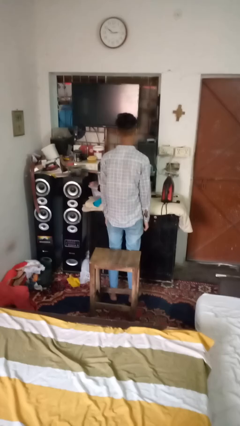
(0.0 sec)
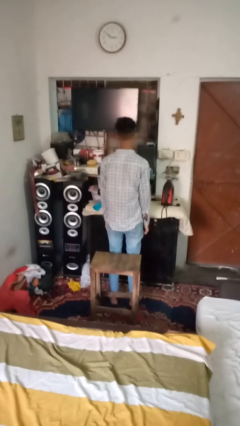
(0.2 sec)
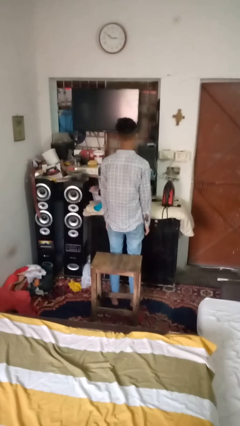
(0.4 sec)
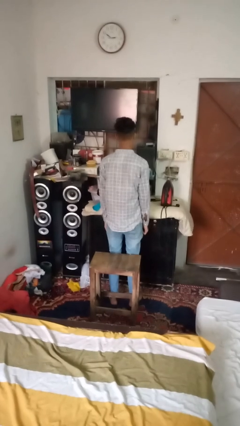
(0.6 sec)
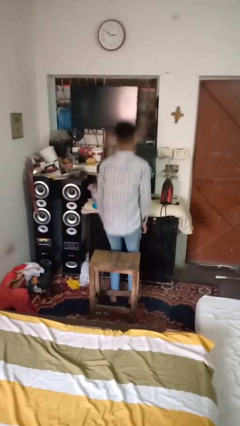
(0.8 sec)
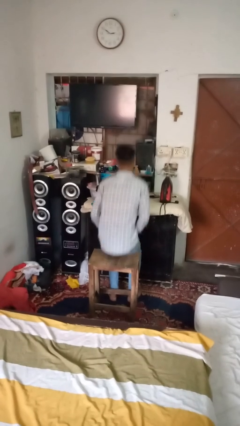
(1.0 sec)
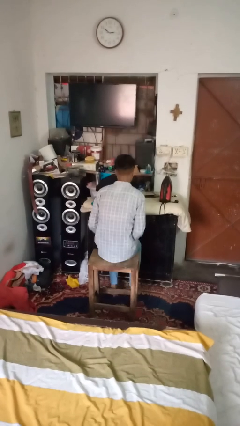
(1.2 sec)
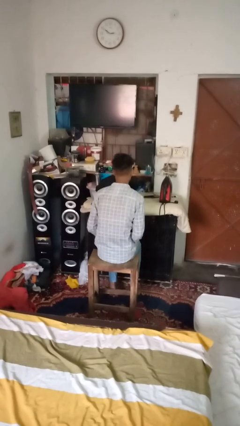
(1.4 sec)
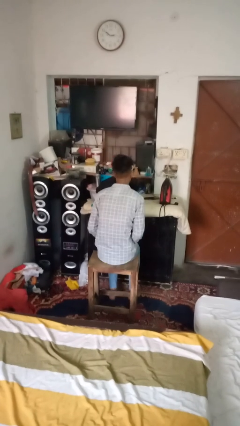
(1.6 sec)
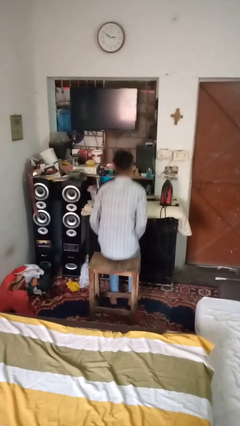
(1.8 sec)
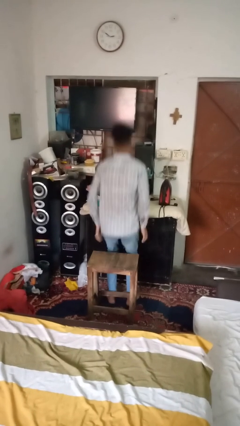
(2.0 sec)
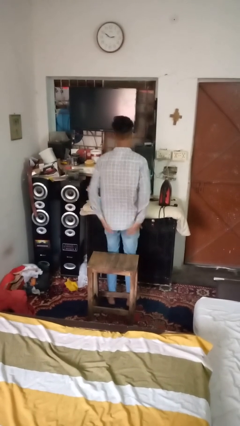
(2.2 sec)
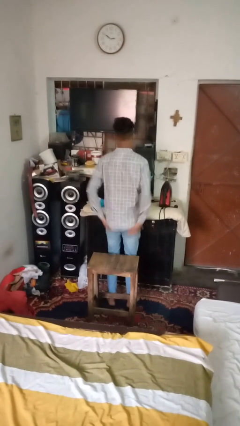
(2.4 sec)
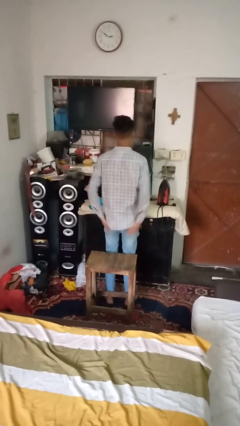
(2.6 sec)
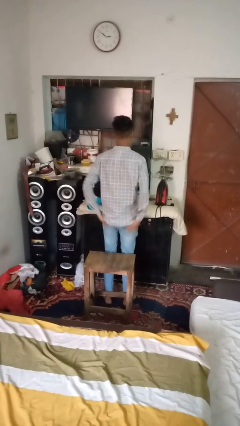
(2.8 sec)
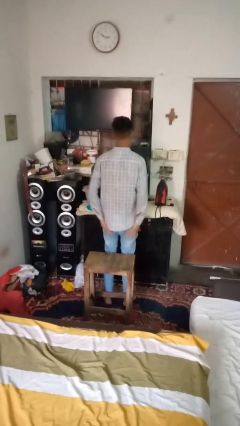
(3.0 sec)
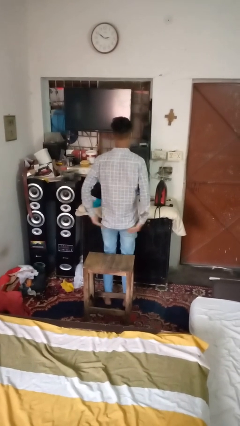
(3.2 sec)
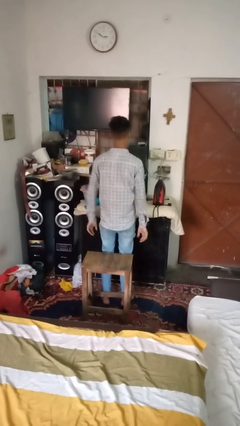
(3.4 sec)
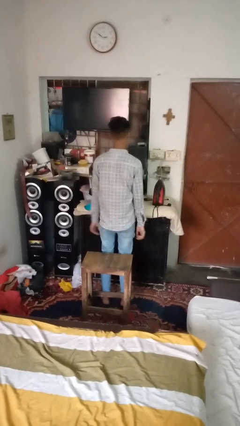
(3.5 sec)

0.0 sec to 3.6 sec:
person bumps into table

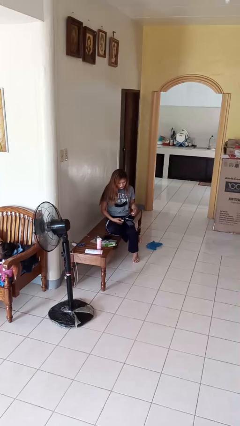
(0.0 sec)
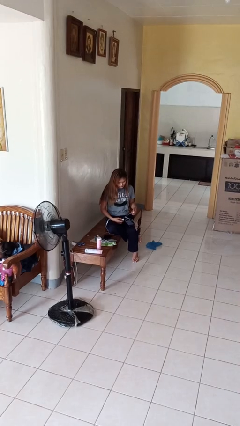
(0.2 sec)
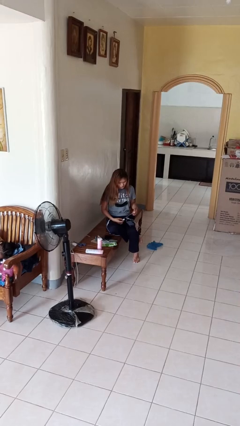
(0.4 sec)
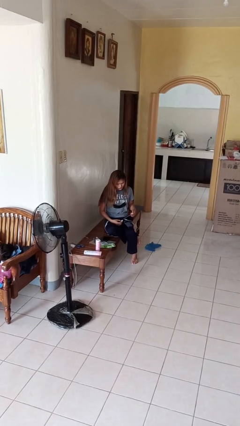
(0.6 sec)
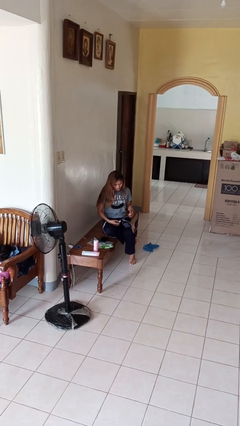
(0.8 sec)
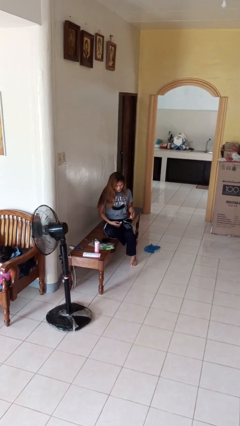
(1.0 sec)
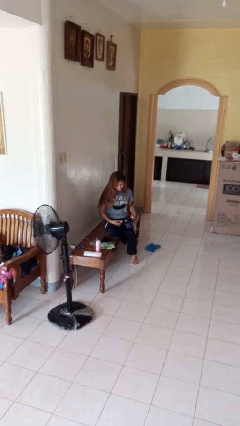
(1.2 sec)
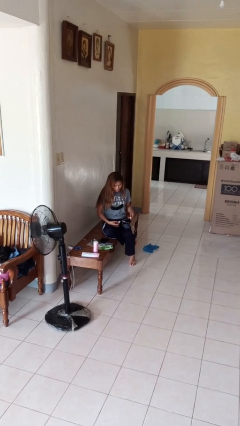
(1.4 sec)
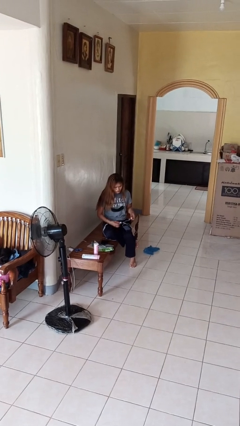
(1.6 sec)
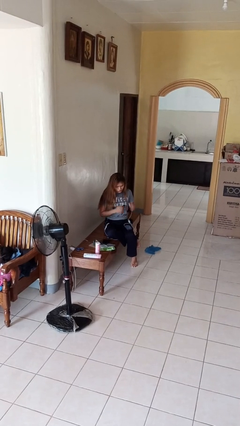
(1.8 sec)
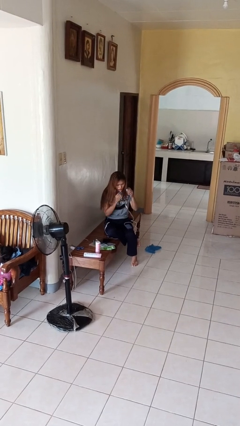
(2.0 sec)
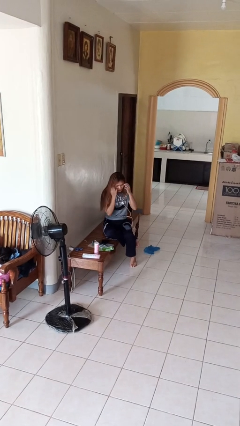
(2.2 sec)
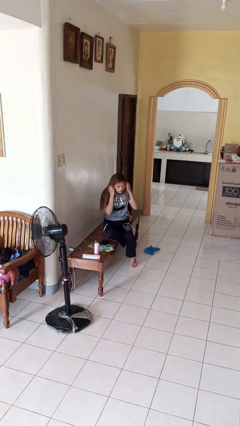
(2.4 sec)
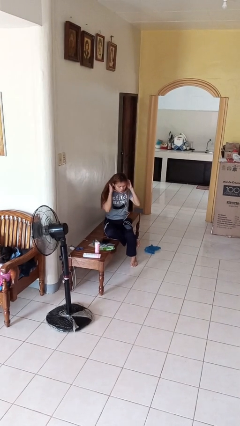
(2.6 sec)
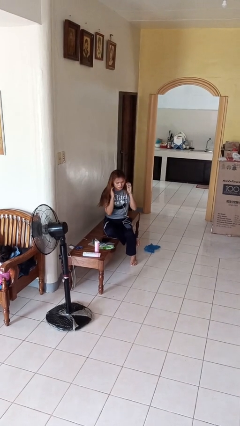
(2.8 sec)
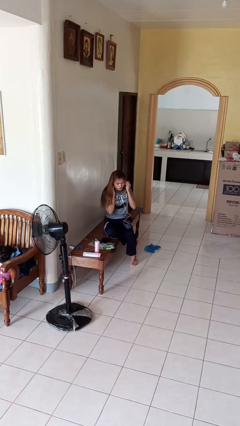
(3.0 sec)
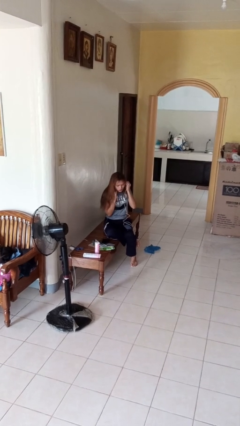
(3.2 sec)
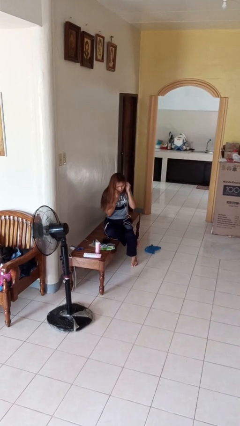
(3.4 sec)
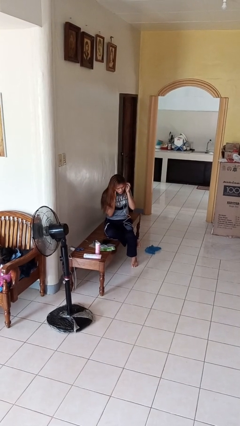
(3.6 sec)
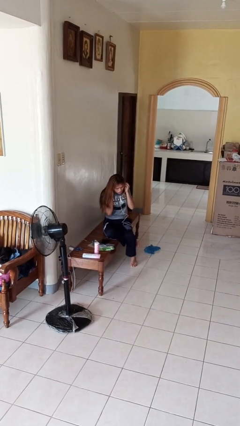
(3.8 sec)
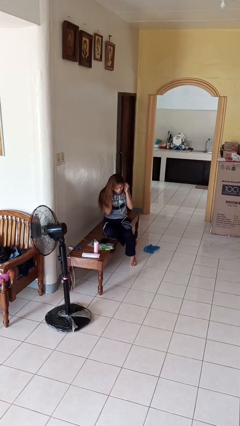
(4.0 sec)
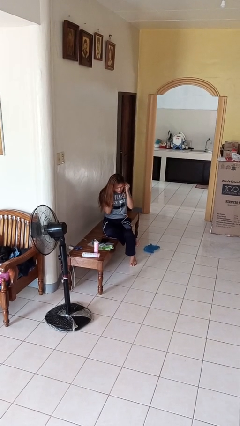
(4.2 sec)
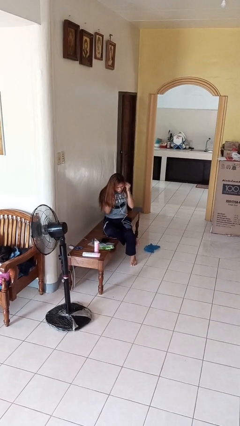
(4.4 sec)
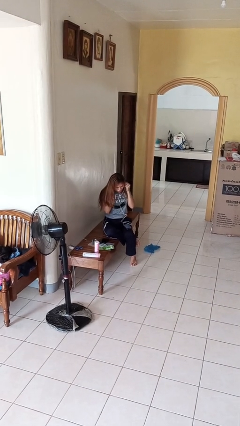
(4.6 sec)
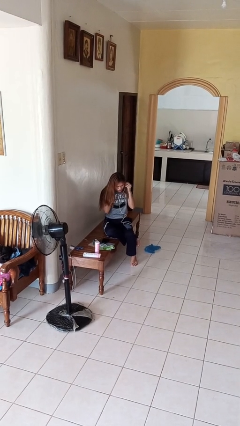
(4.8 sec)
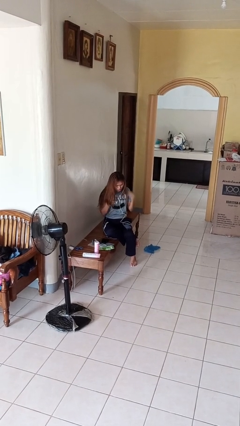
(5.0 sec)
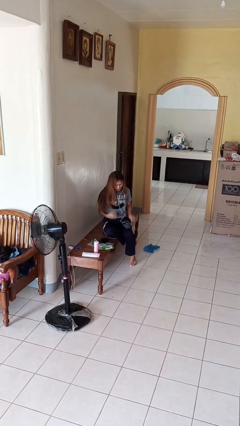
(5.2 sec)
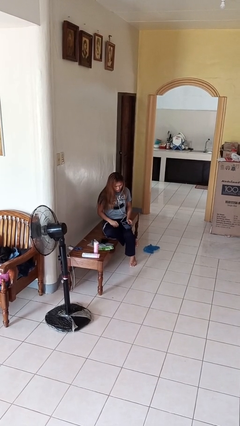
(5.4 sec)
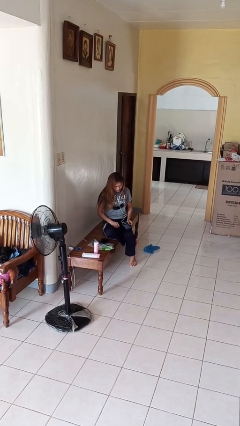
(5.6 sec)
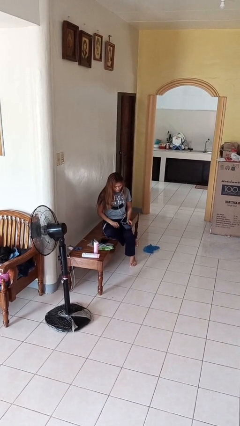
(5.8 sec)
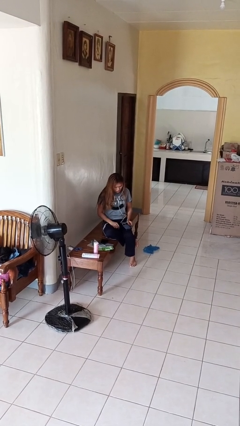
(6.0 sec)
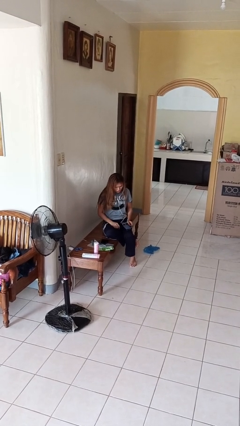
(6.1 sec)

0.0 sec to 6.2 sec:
person puts on headphones

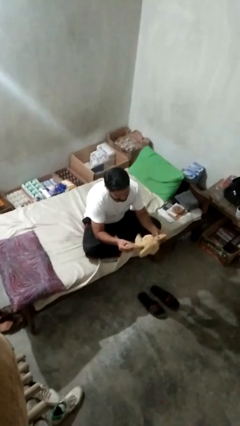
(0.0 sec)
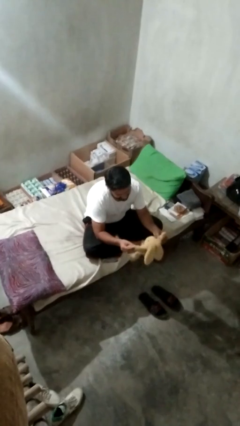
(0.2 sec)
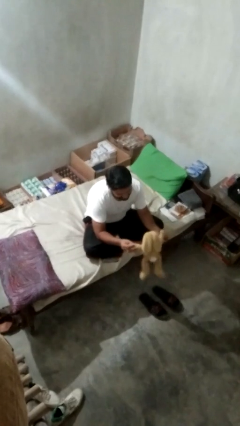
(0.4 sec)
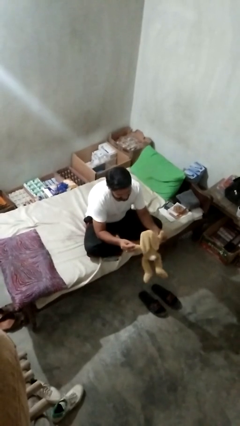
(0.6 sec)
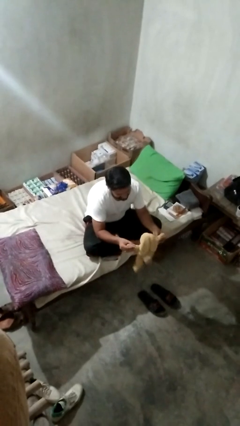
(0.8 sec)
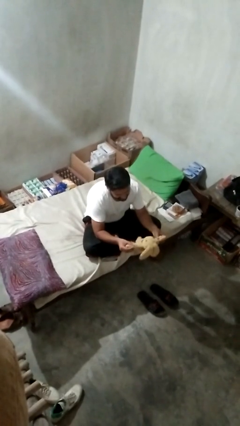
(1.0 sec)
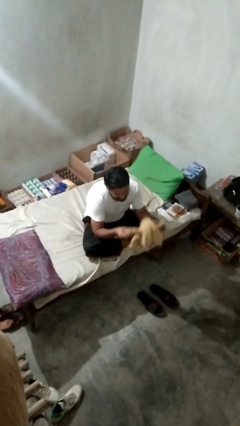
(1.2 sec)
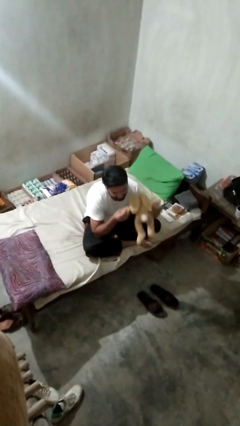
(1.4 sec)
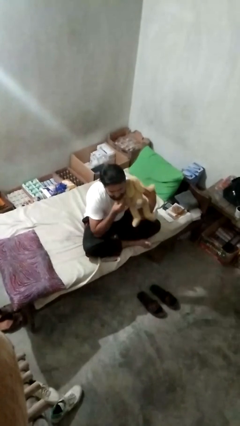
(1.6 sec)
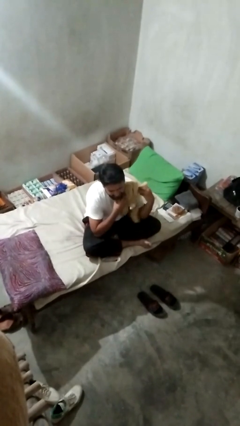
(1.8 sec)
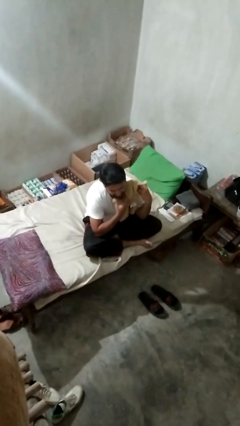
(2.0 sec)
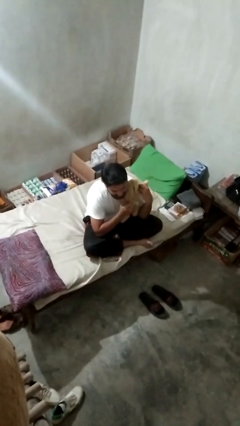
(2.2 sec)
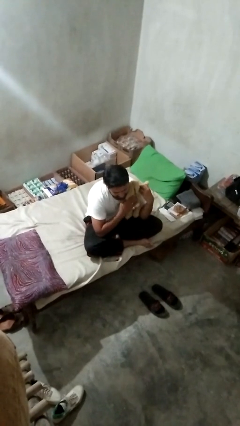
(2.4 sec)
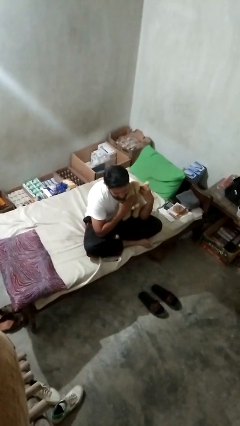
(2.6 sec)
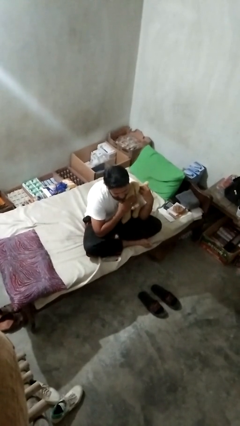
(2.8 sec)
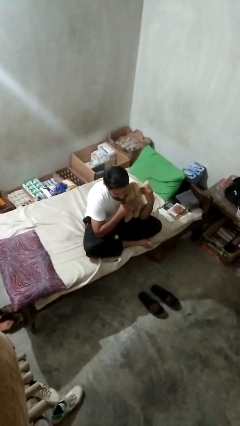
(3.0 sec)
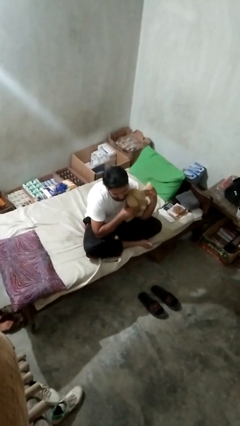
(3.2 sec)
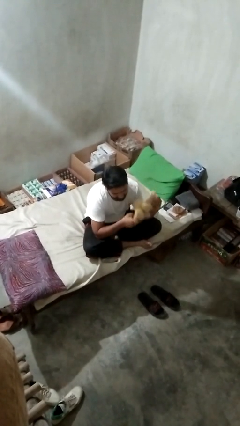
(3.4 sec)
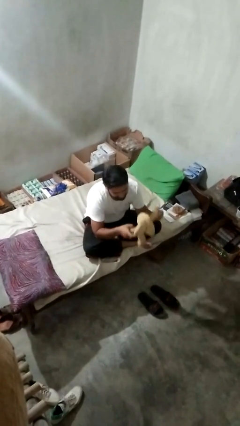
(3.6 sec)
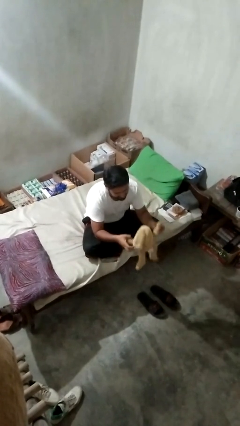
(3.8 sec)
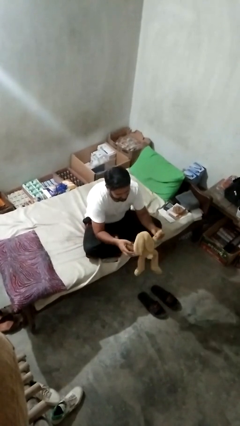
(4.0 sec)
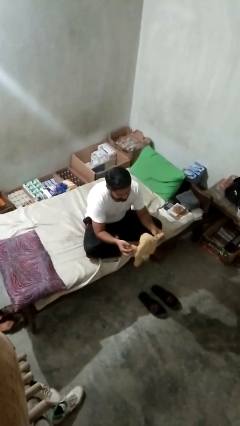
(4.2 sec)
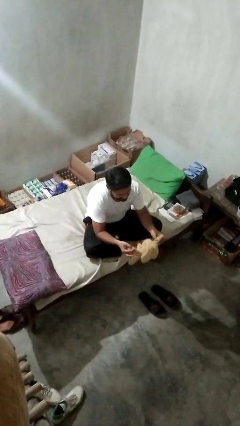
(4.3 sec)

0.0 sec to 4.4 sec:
person hugs stuffed animal

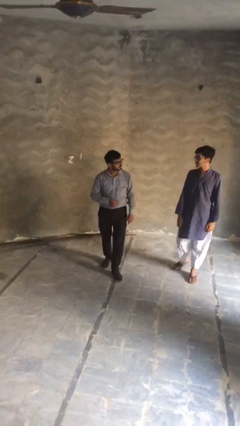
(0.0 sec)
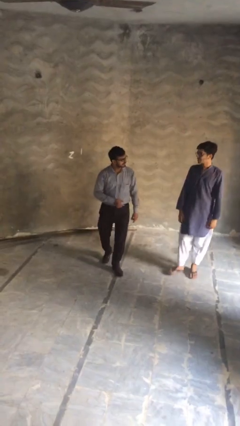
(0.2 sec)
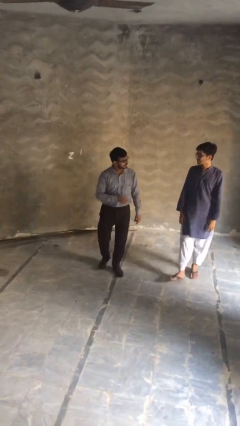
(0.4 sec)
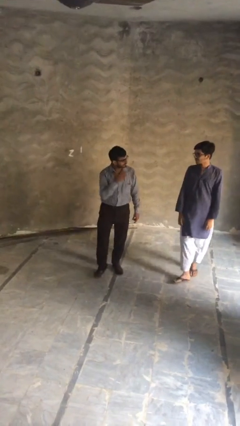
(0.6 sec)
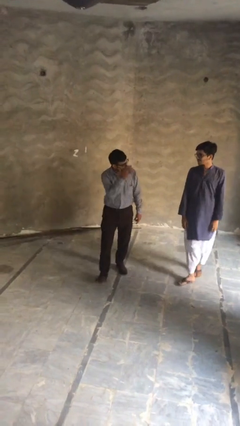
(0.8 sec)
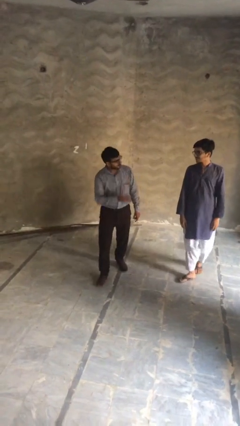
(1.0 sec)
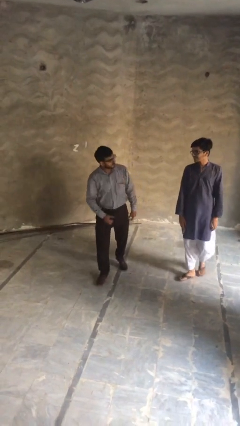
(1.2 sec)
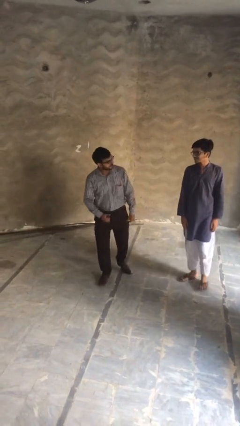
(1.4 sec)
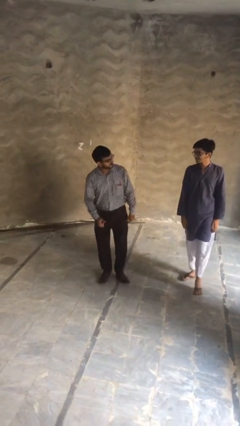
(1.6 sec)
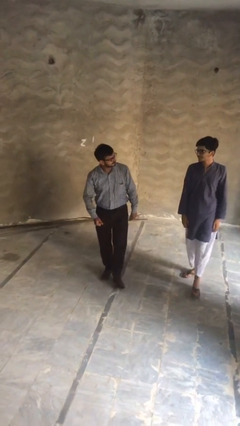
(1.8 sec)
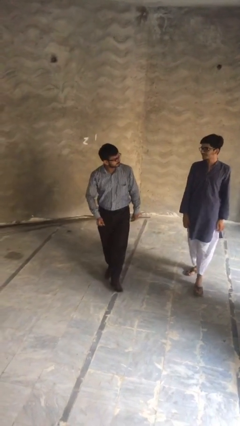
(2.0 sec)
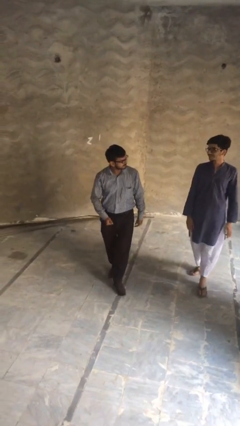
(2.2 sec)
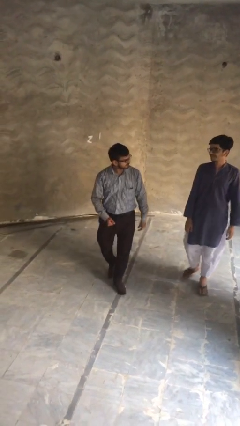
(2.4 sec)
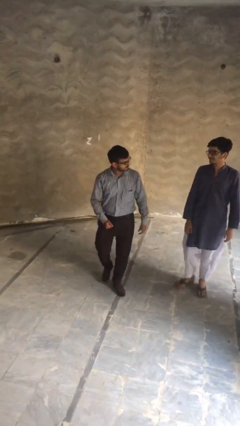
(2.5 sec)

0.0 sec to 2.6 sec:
person talks to person

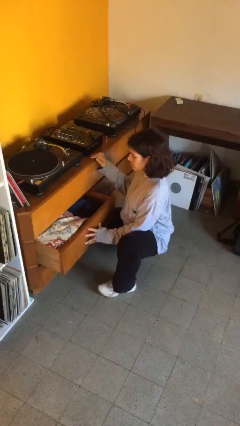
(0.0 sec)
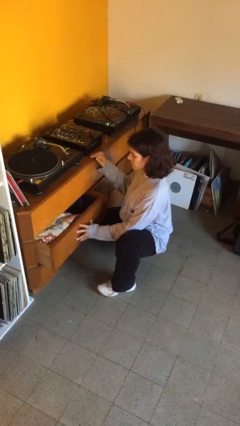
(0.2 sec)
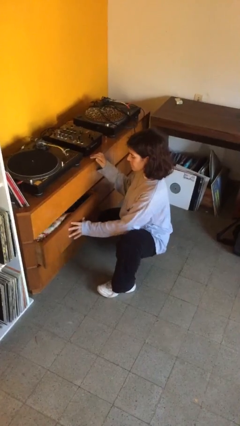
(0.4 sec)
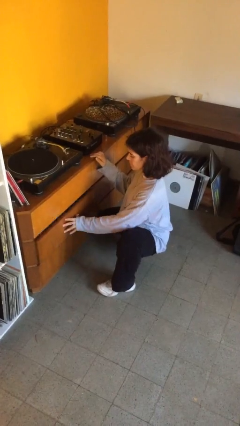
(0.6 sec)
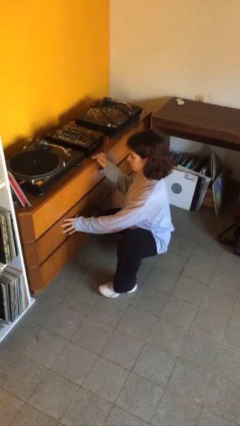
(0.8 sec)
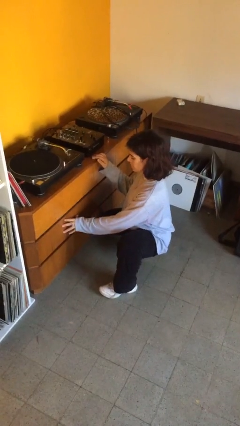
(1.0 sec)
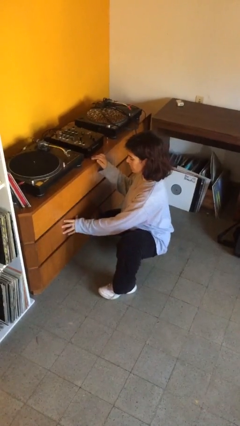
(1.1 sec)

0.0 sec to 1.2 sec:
person closes dresser drawer
